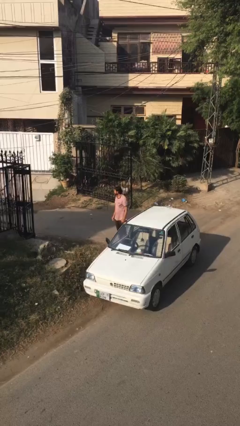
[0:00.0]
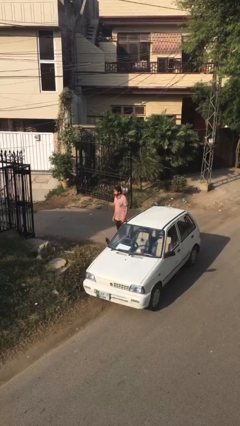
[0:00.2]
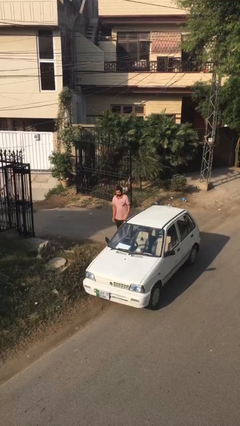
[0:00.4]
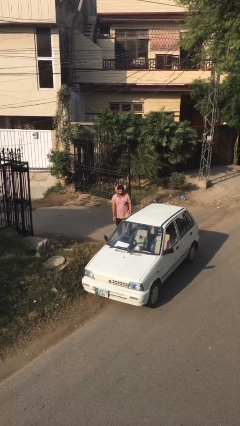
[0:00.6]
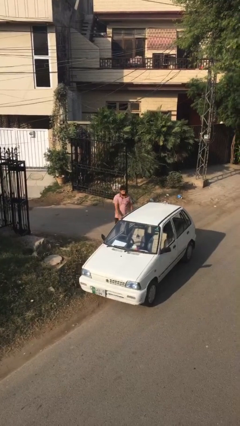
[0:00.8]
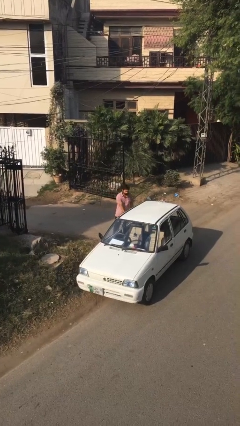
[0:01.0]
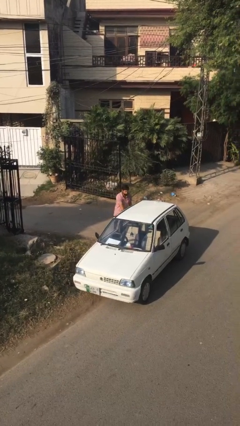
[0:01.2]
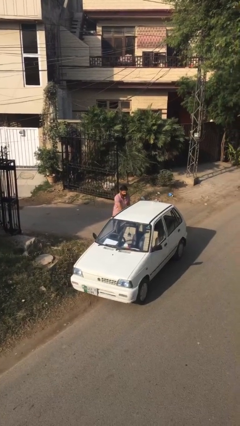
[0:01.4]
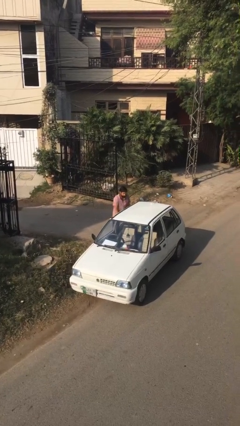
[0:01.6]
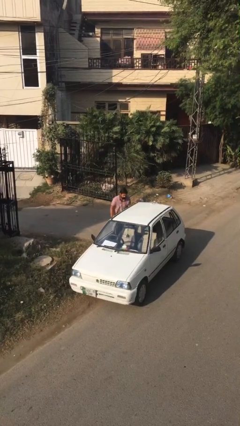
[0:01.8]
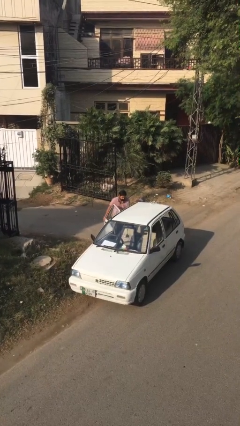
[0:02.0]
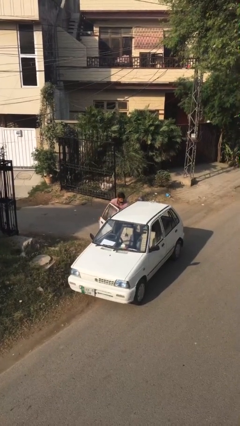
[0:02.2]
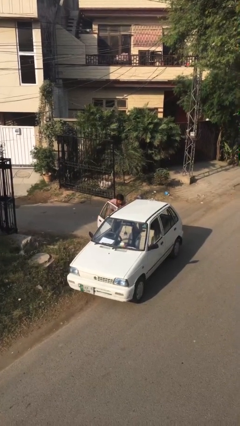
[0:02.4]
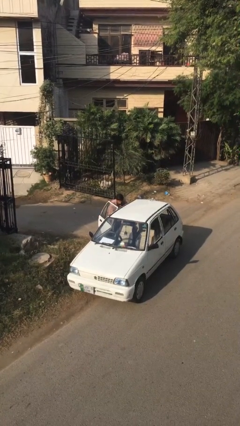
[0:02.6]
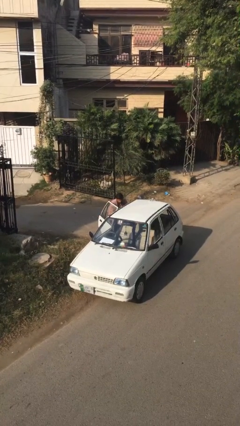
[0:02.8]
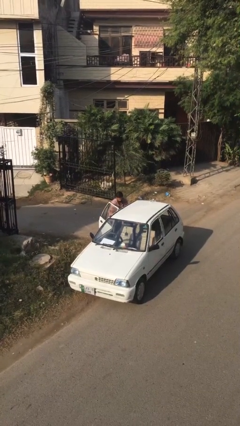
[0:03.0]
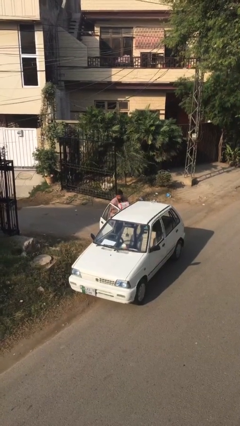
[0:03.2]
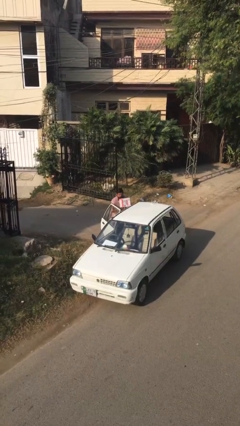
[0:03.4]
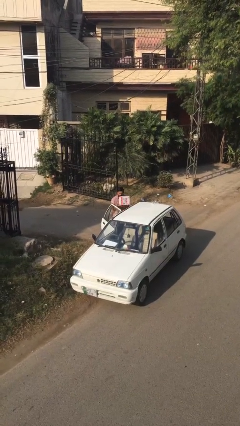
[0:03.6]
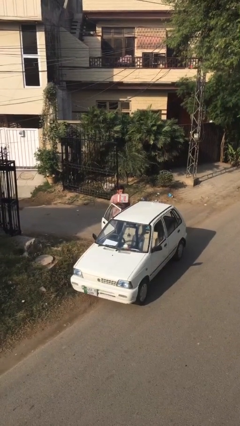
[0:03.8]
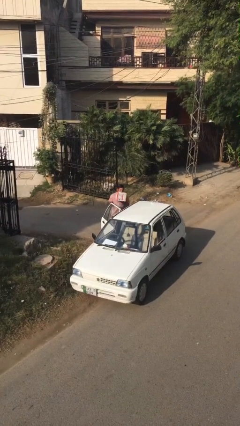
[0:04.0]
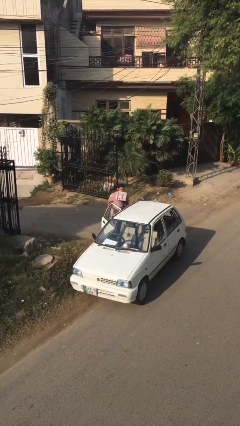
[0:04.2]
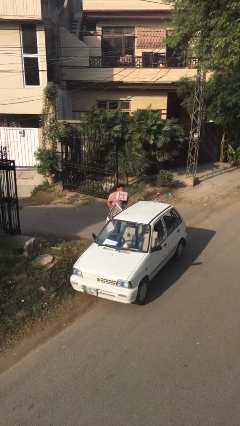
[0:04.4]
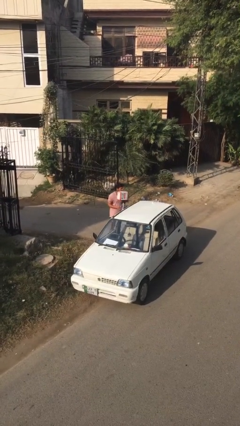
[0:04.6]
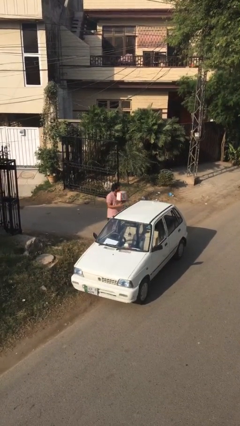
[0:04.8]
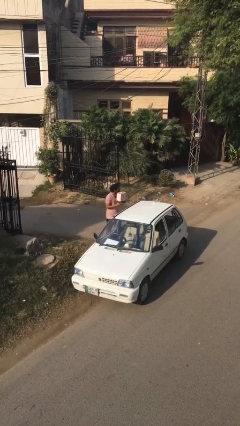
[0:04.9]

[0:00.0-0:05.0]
person unloads car

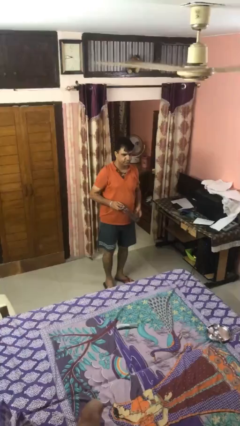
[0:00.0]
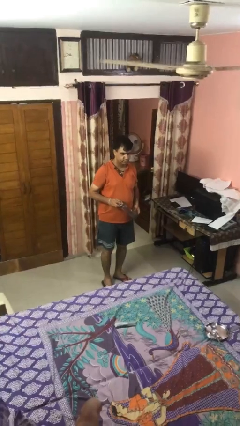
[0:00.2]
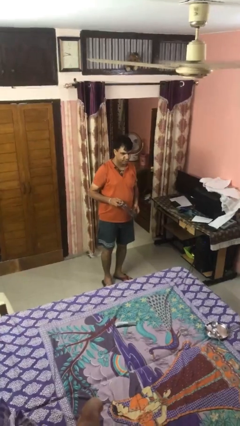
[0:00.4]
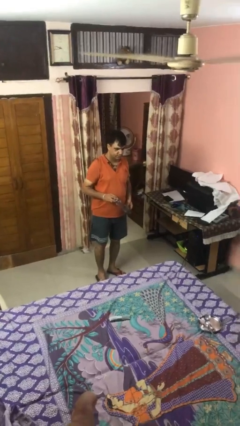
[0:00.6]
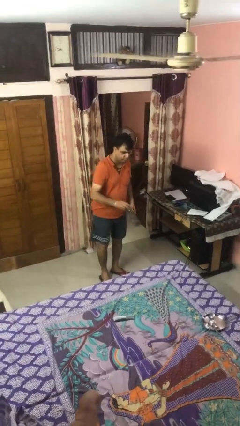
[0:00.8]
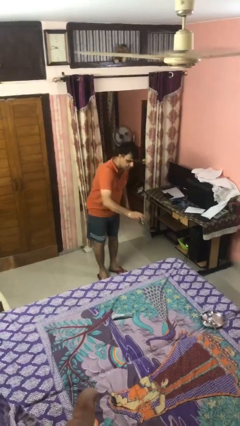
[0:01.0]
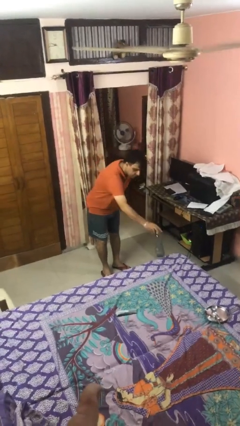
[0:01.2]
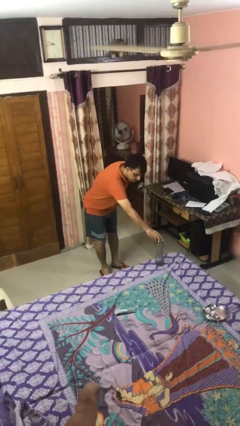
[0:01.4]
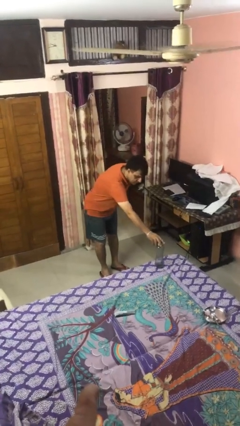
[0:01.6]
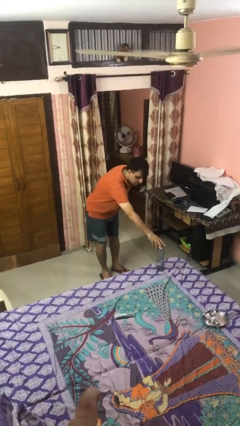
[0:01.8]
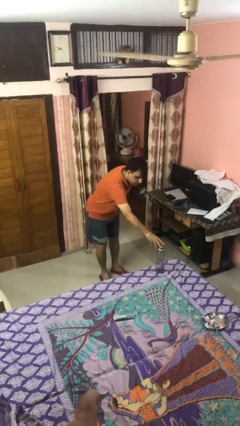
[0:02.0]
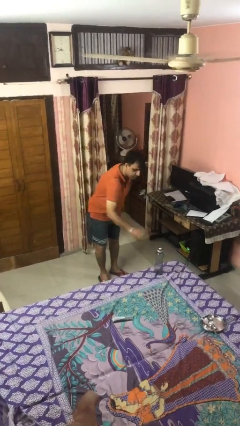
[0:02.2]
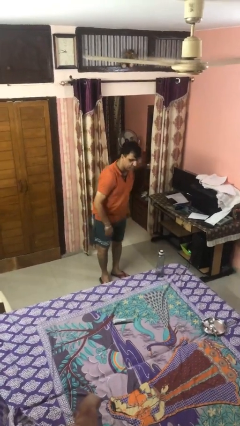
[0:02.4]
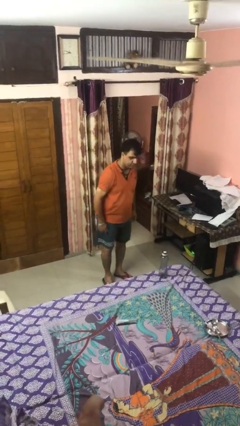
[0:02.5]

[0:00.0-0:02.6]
person puts down object on bed

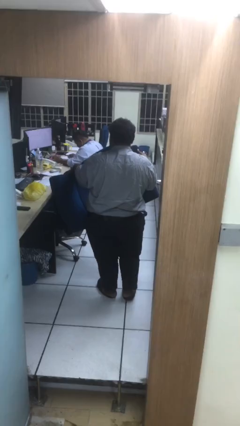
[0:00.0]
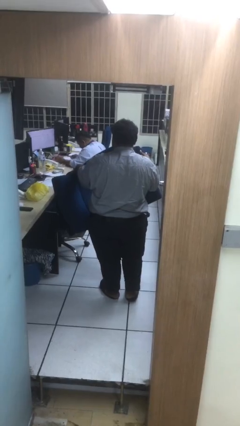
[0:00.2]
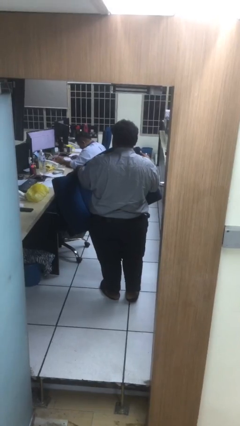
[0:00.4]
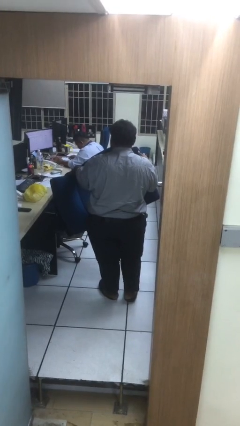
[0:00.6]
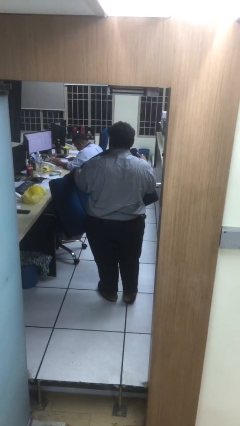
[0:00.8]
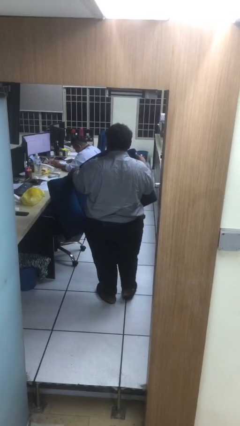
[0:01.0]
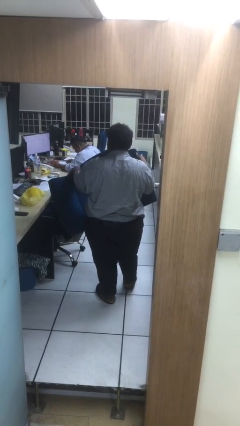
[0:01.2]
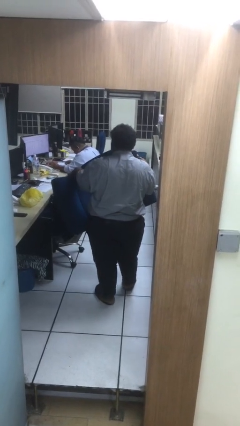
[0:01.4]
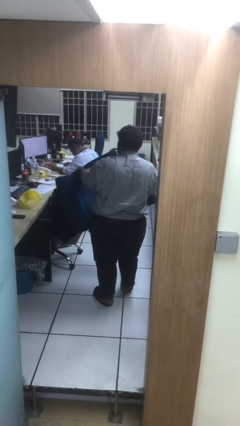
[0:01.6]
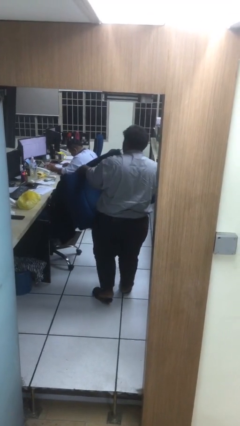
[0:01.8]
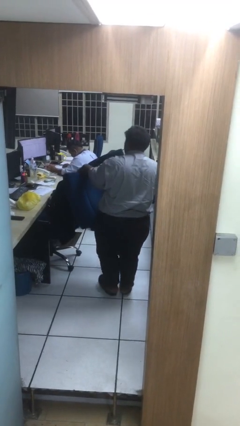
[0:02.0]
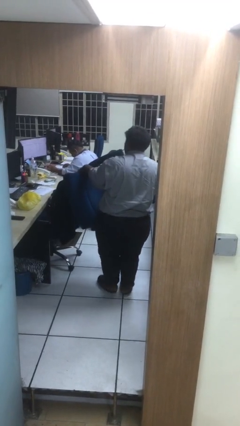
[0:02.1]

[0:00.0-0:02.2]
person carries furniture

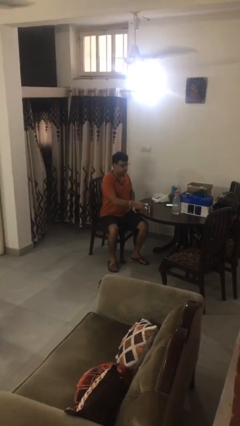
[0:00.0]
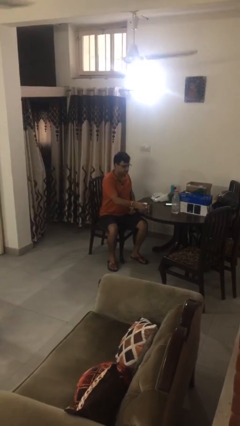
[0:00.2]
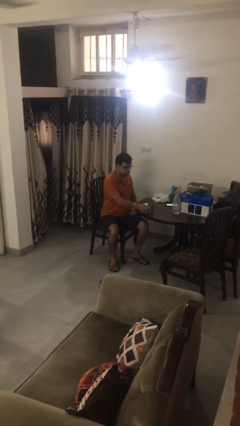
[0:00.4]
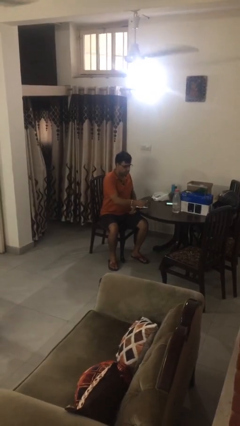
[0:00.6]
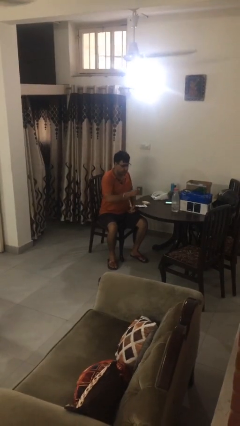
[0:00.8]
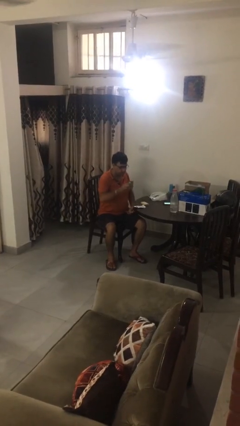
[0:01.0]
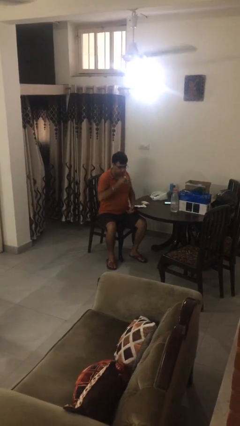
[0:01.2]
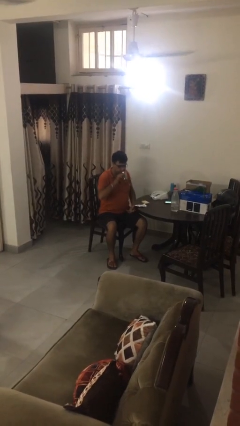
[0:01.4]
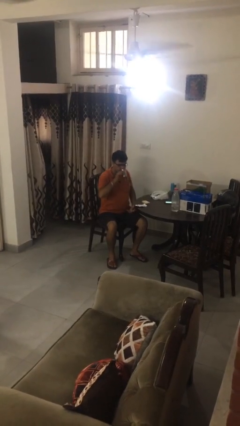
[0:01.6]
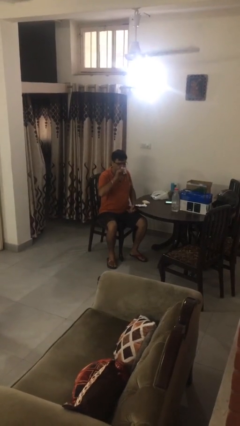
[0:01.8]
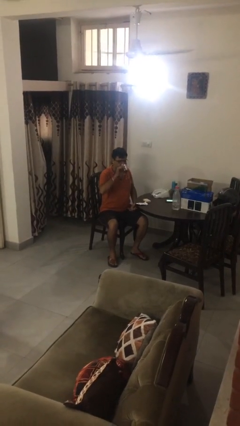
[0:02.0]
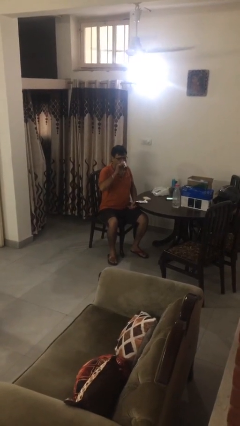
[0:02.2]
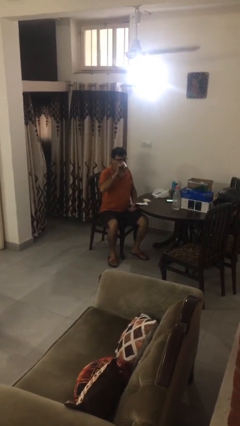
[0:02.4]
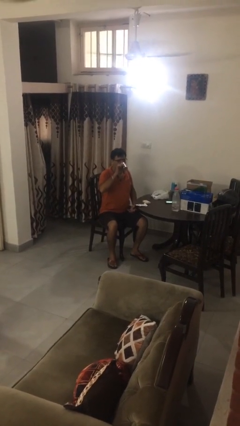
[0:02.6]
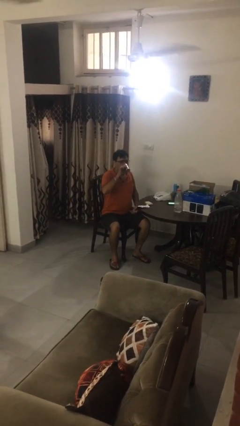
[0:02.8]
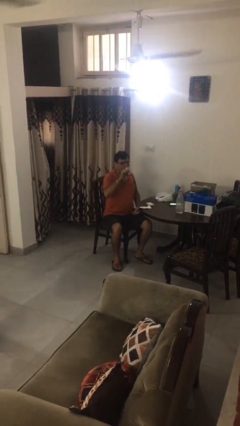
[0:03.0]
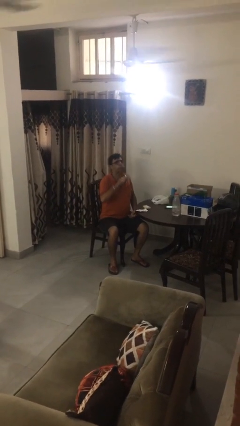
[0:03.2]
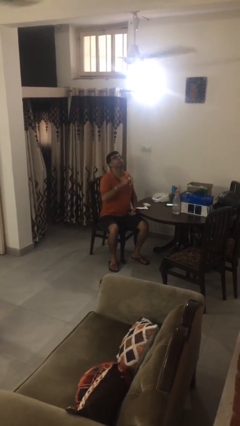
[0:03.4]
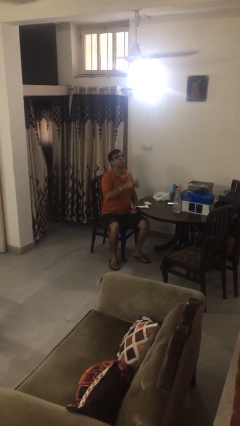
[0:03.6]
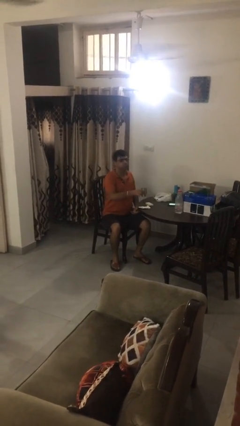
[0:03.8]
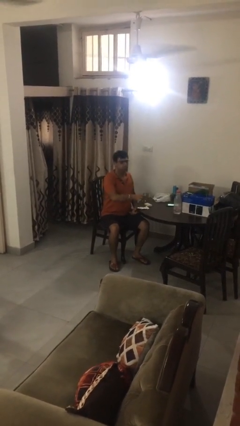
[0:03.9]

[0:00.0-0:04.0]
person drinks from cup

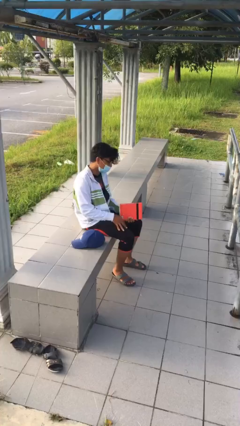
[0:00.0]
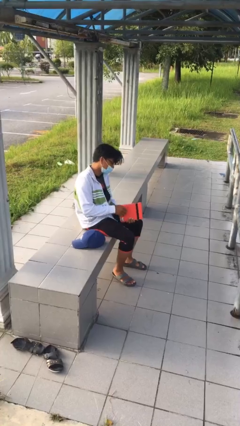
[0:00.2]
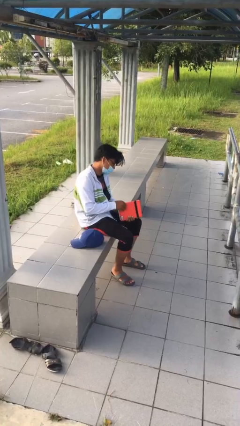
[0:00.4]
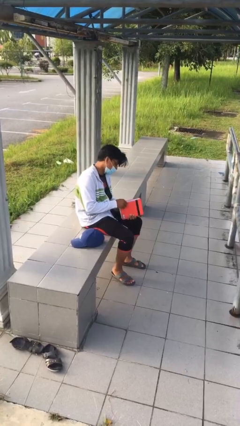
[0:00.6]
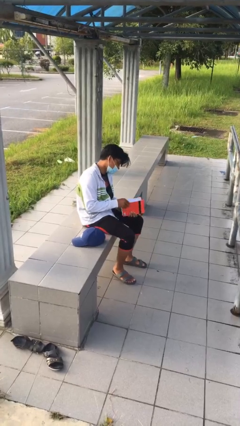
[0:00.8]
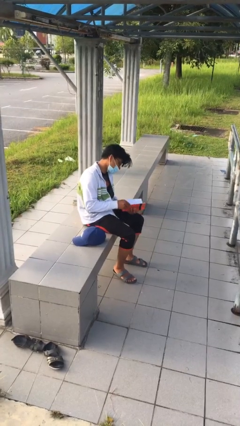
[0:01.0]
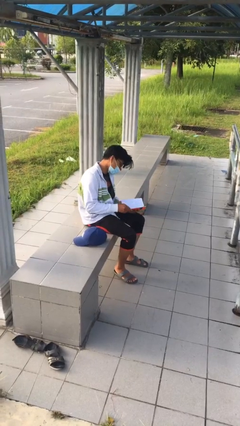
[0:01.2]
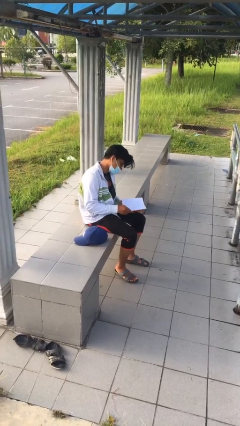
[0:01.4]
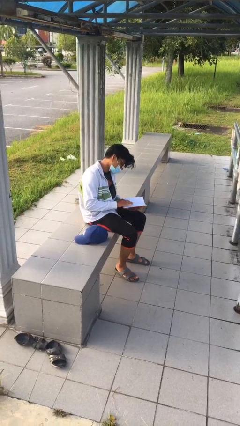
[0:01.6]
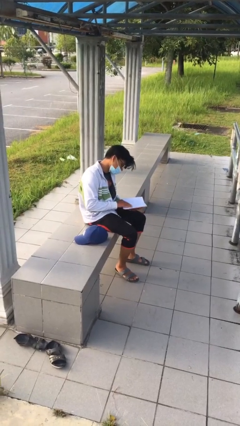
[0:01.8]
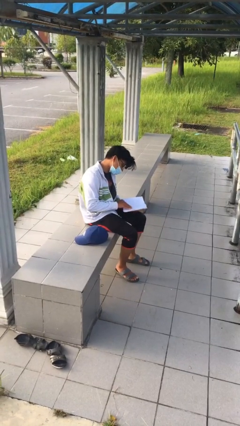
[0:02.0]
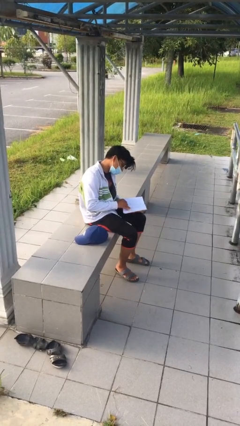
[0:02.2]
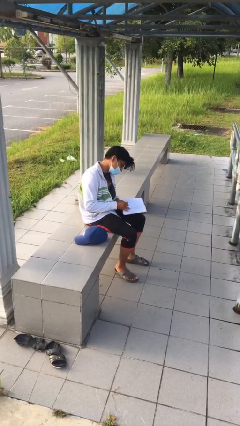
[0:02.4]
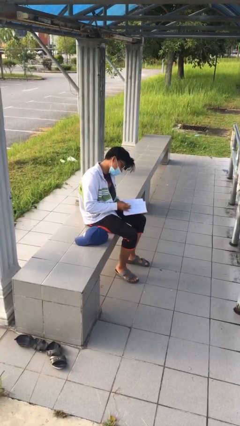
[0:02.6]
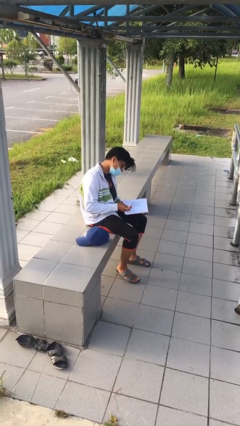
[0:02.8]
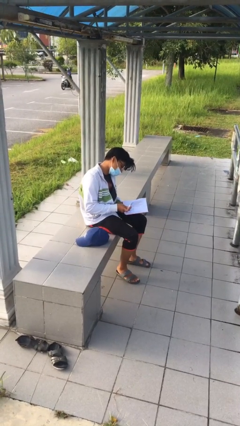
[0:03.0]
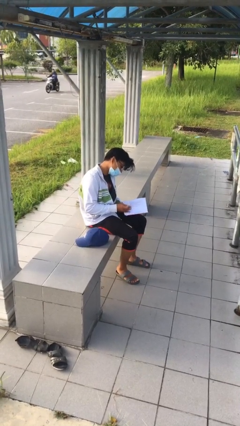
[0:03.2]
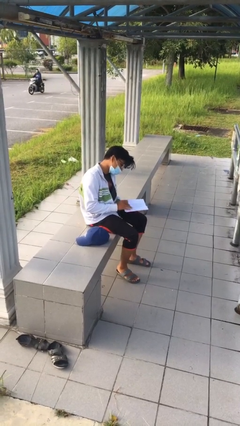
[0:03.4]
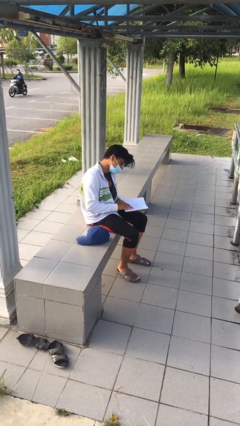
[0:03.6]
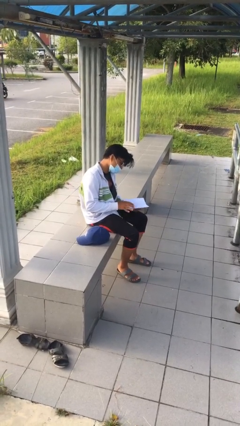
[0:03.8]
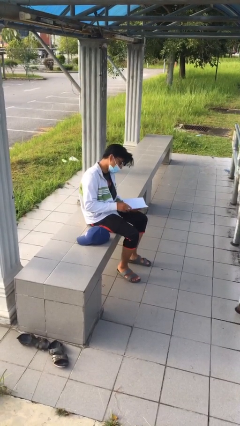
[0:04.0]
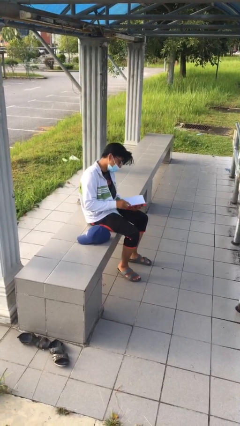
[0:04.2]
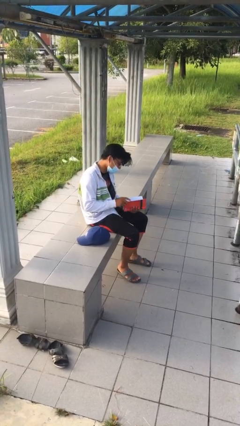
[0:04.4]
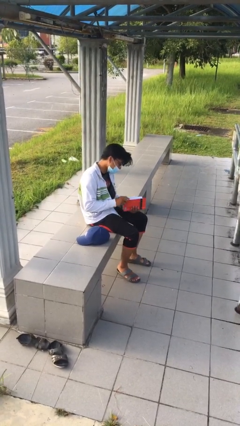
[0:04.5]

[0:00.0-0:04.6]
person reads document
